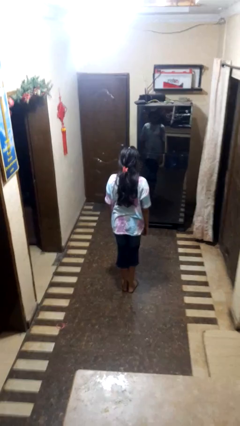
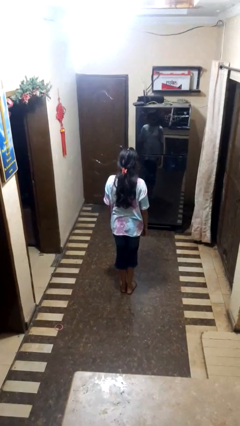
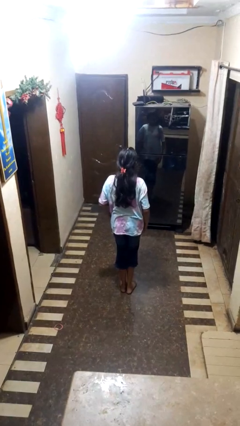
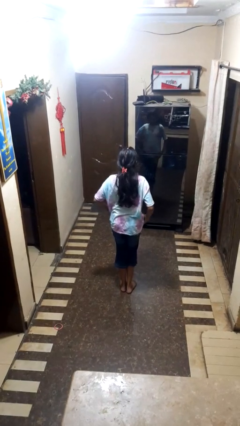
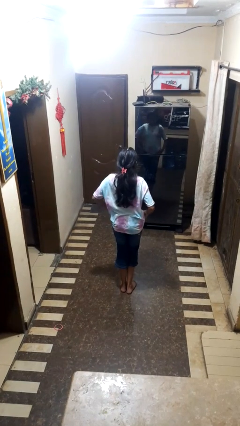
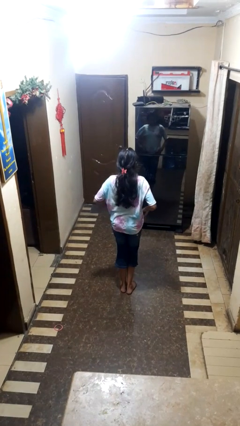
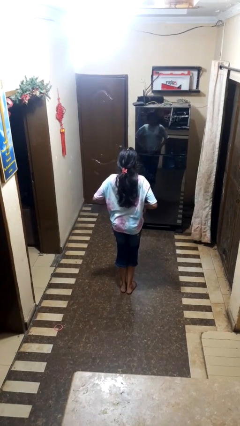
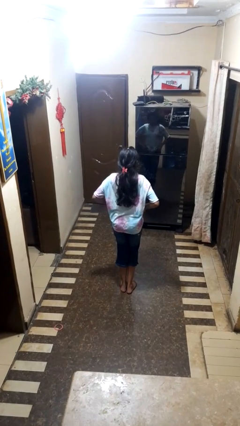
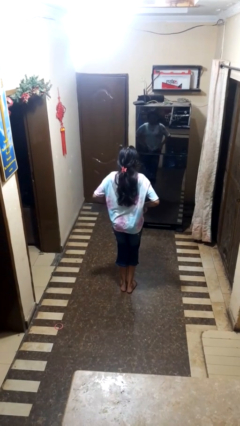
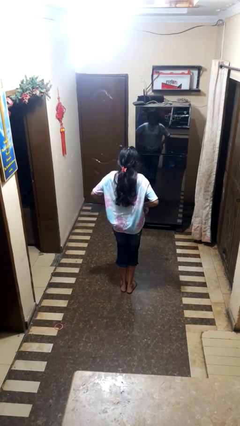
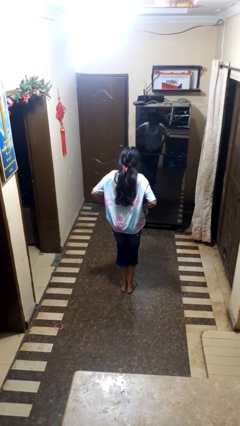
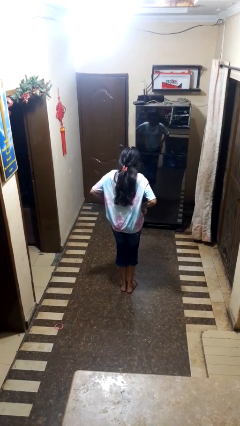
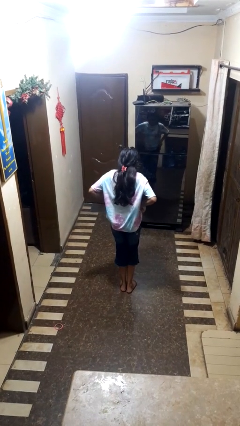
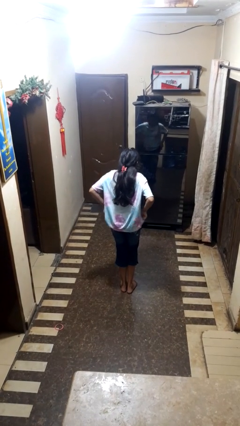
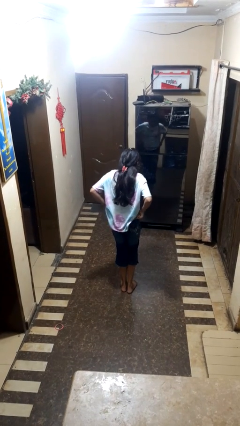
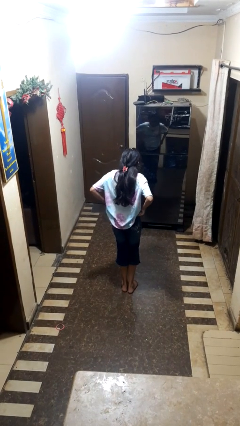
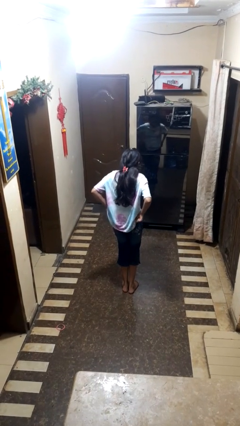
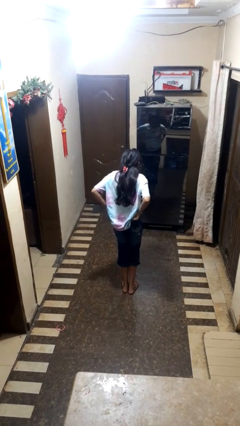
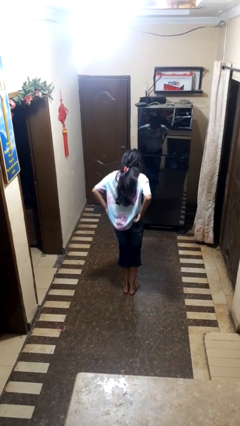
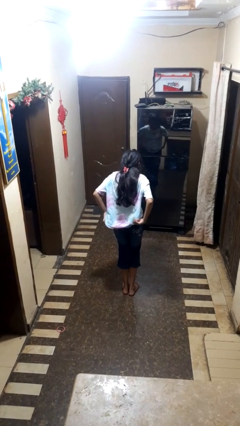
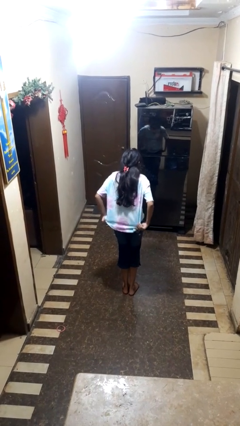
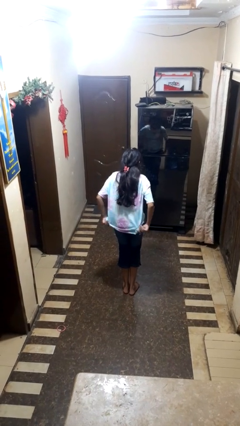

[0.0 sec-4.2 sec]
person hikes up pants

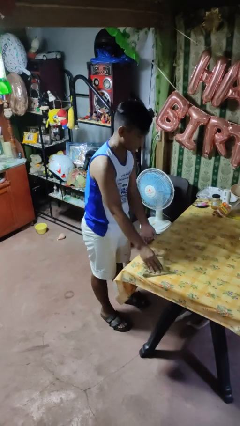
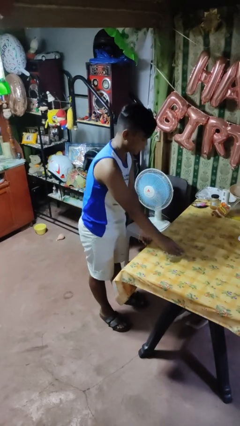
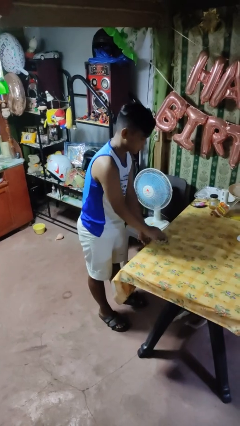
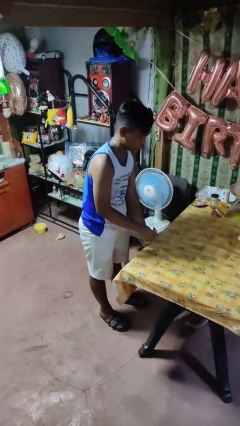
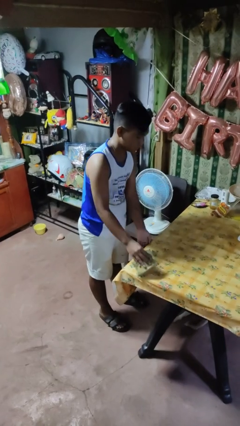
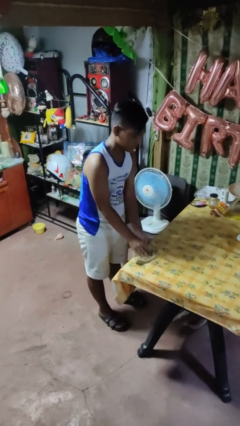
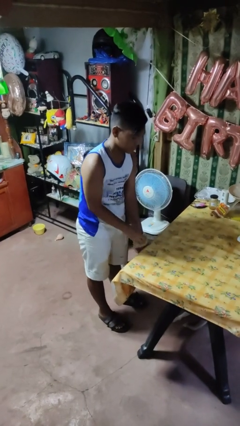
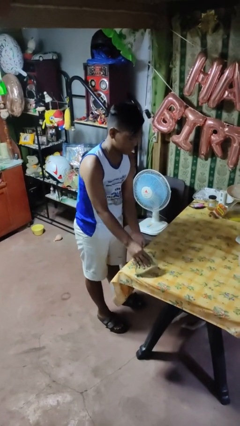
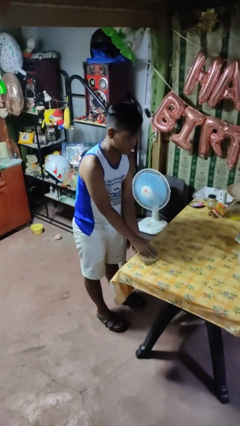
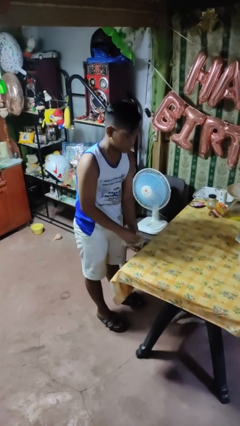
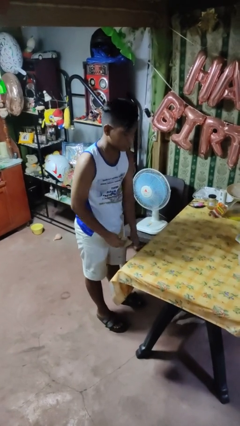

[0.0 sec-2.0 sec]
person cleans table with rag

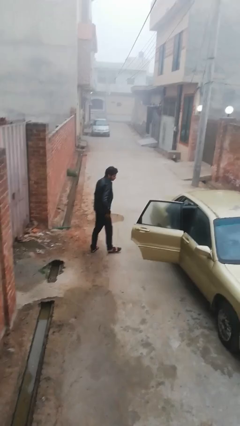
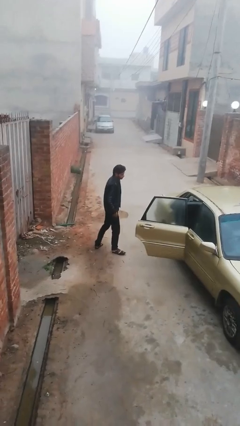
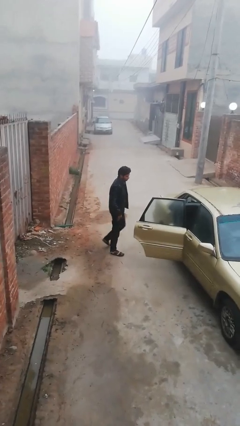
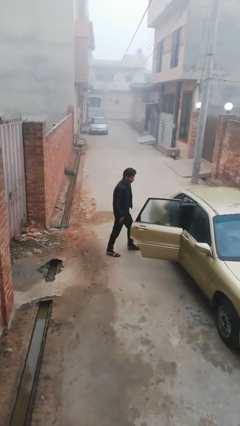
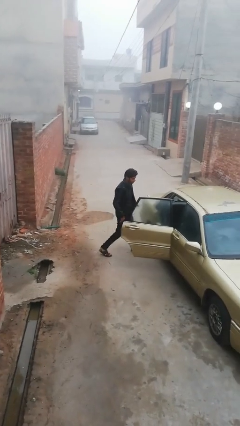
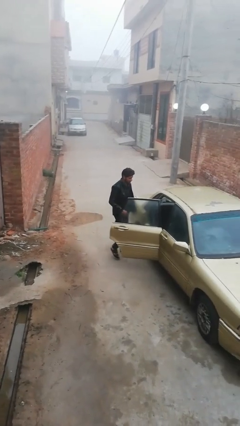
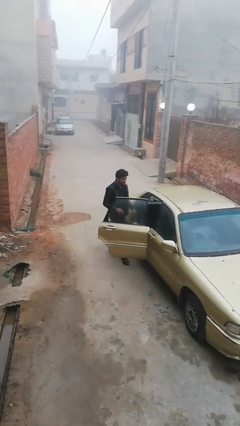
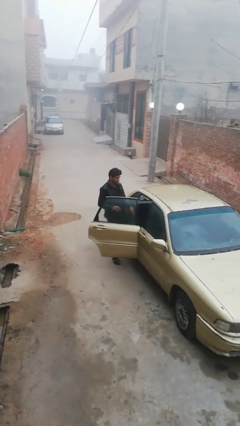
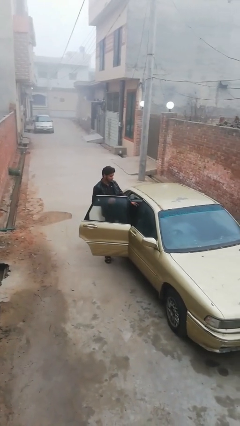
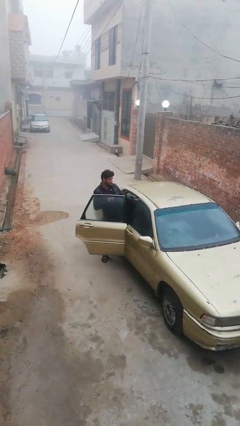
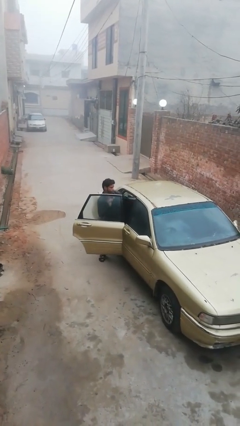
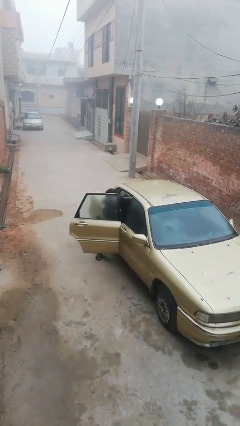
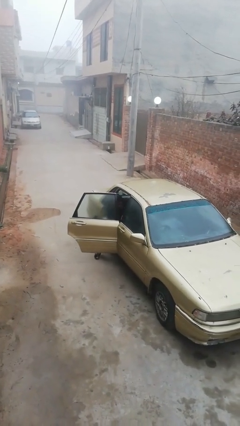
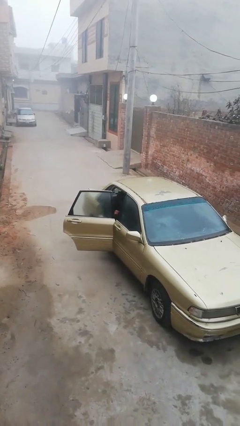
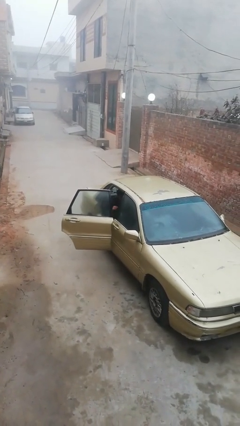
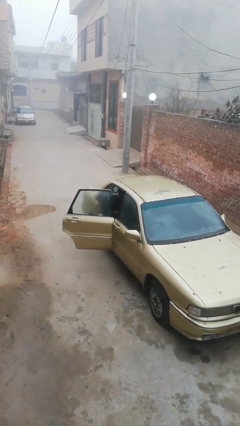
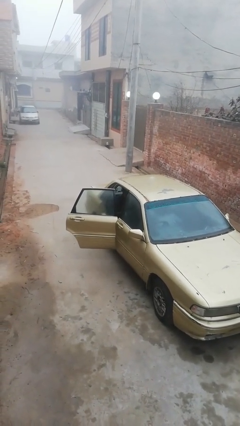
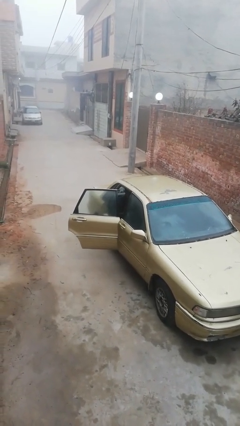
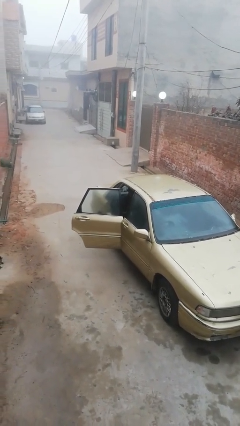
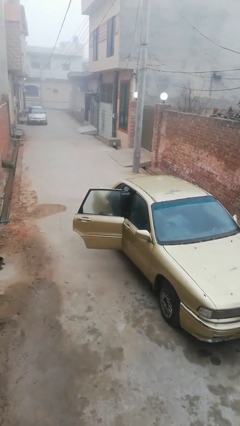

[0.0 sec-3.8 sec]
person enters car

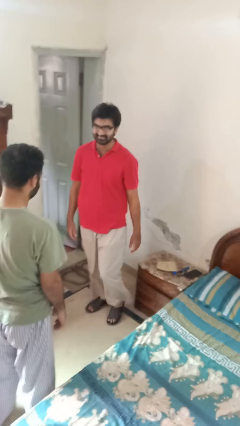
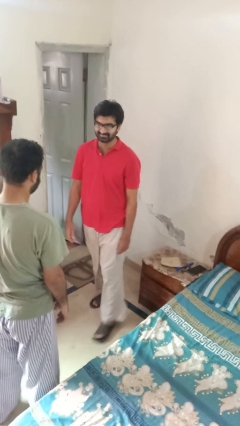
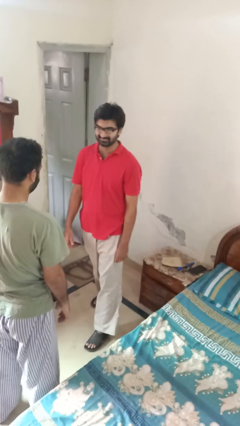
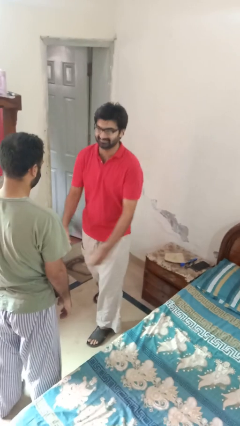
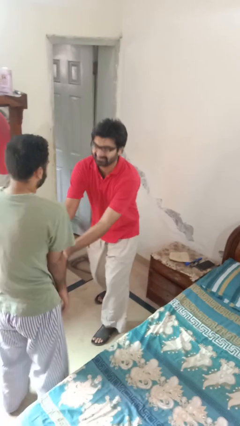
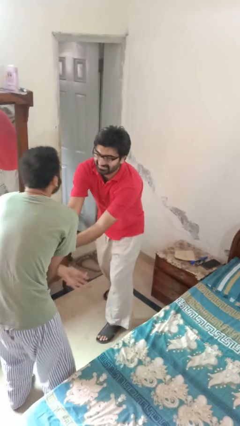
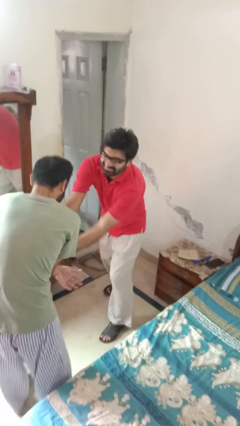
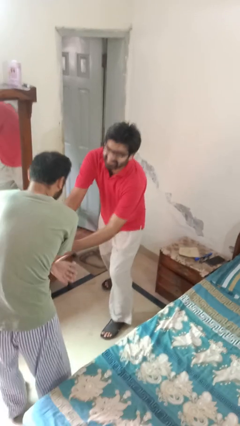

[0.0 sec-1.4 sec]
person tickles person

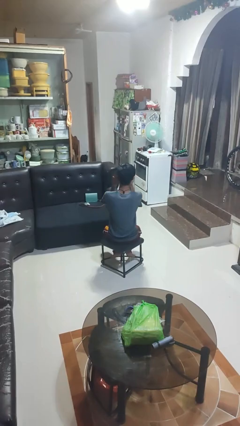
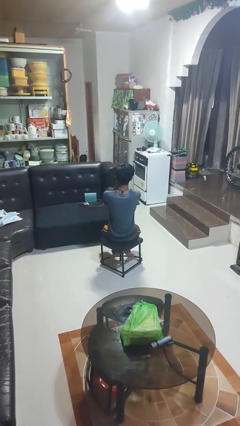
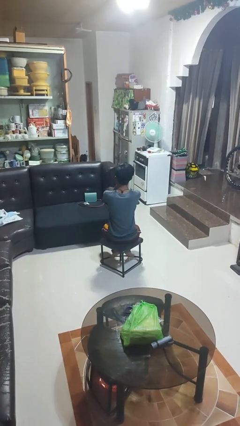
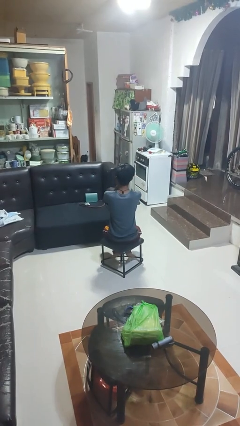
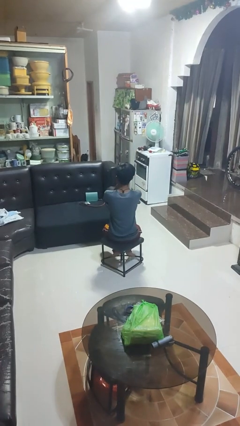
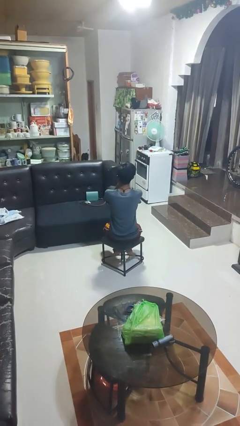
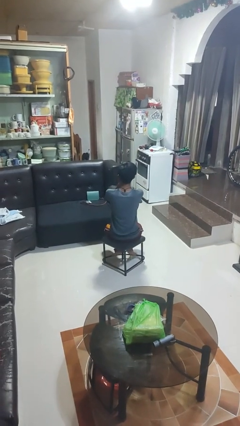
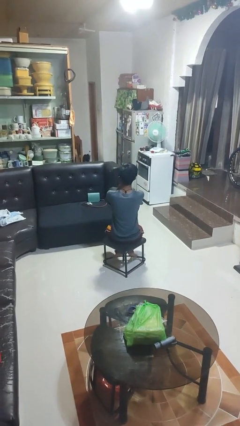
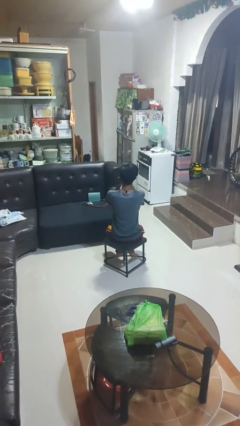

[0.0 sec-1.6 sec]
person covers face with hands

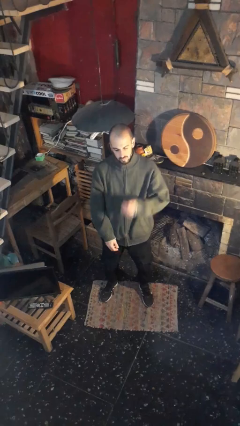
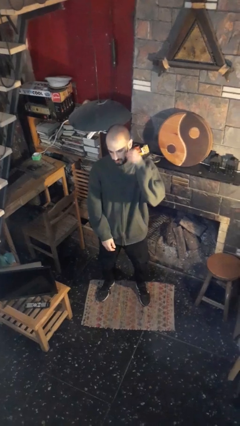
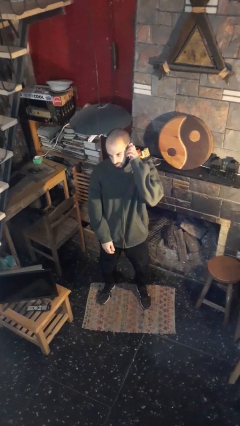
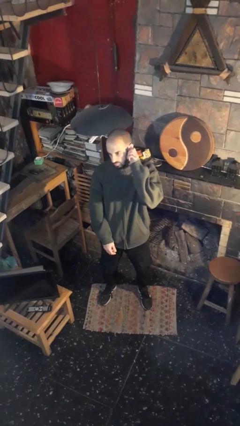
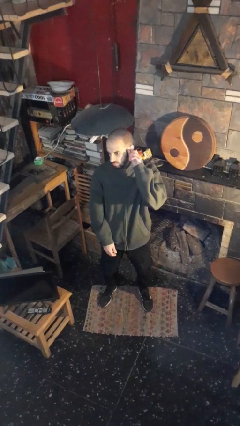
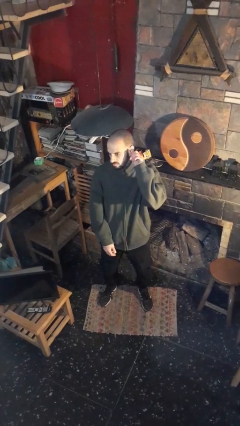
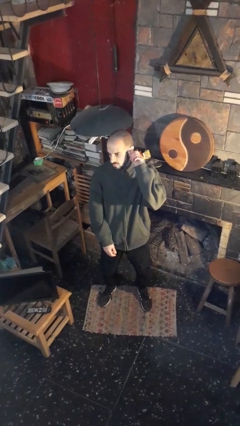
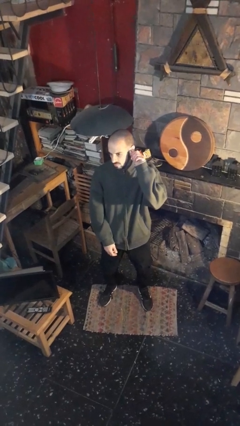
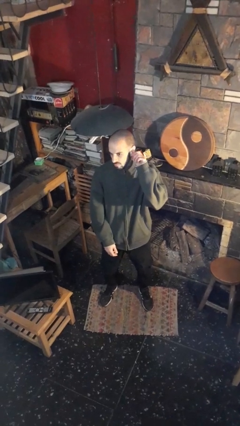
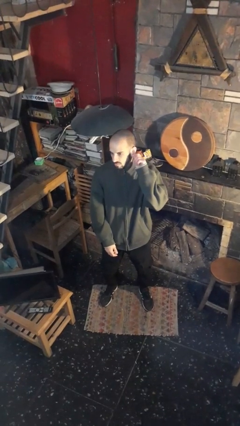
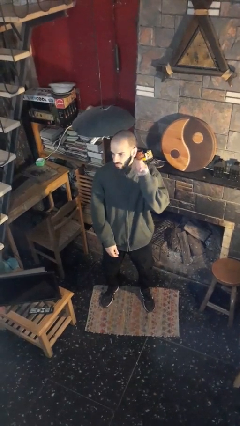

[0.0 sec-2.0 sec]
person touches earlobe

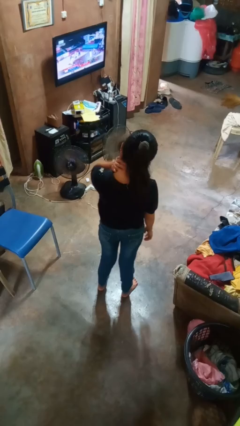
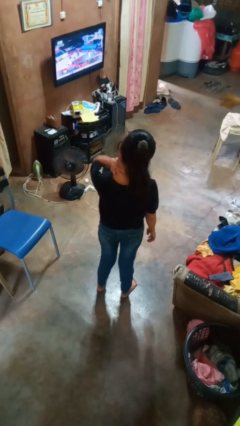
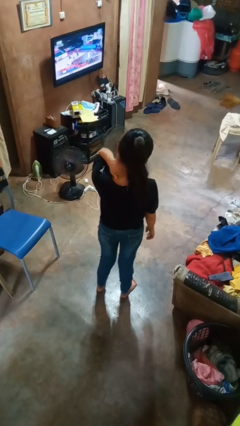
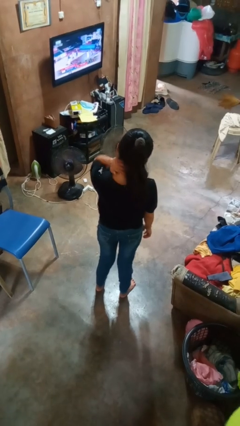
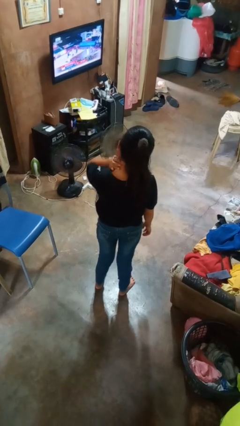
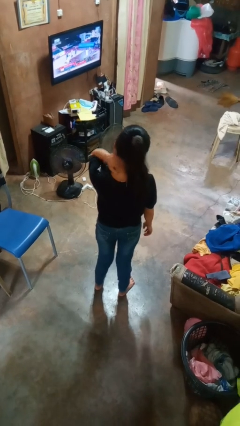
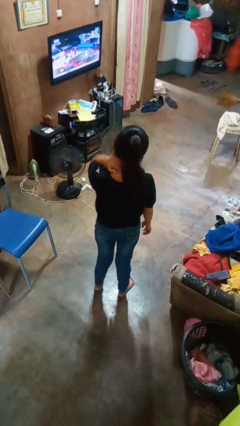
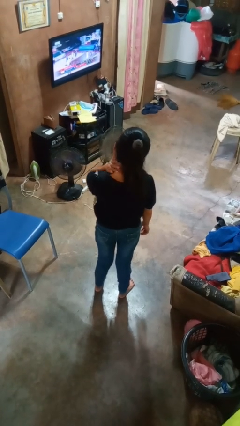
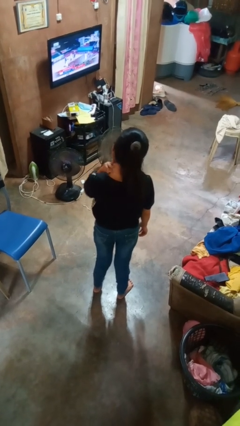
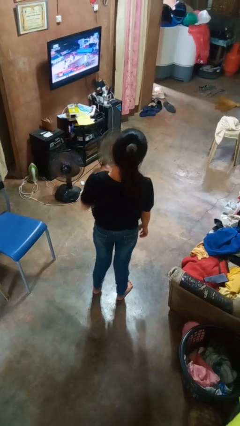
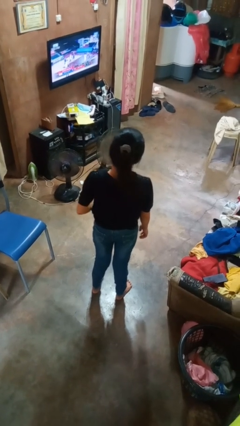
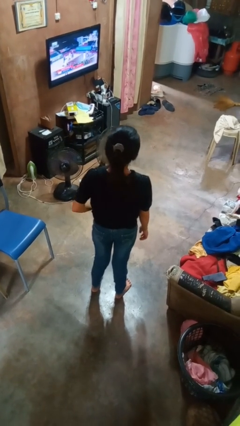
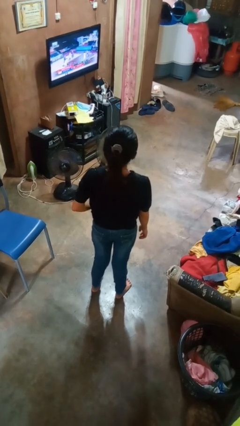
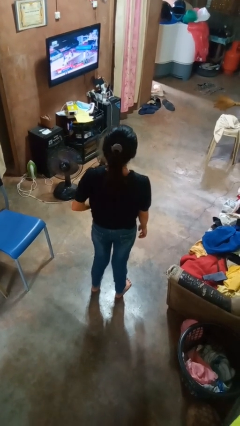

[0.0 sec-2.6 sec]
person rubs neck
